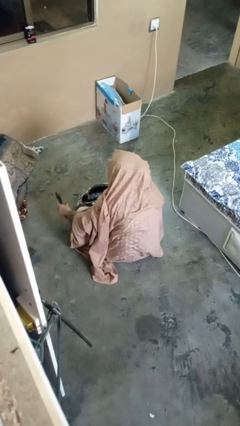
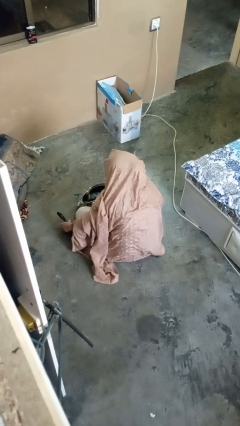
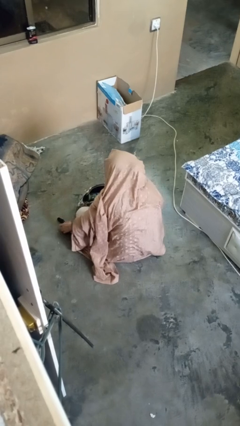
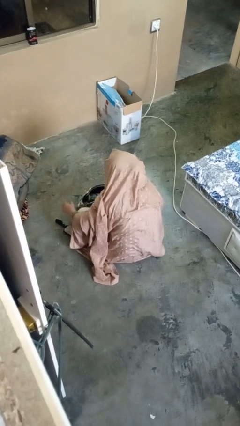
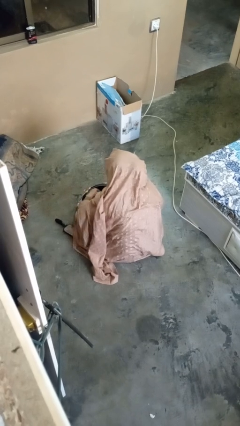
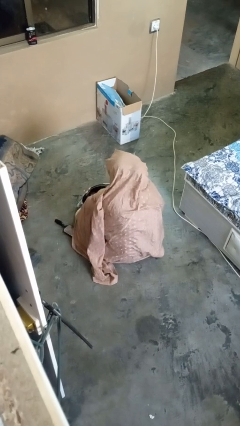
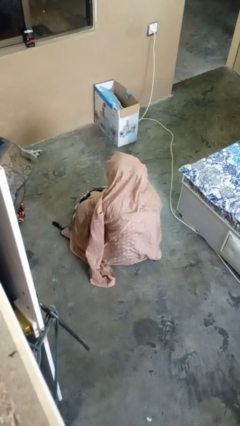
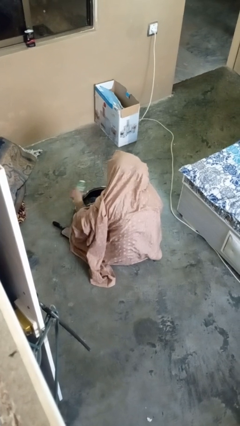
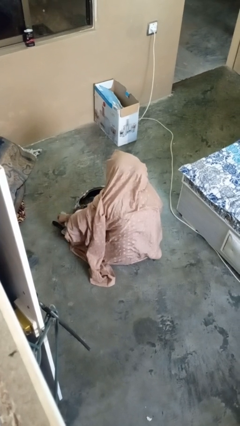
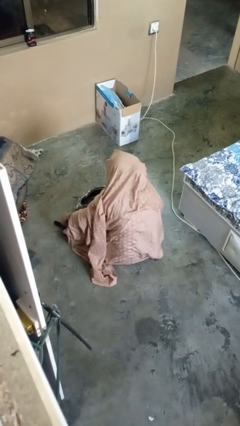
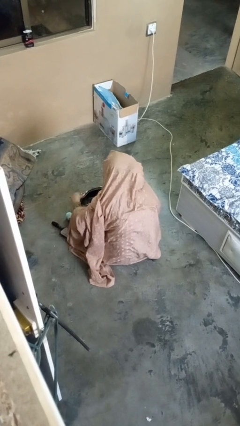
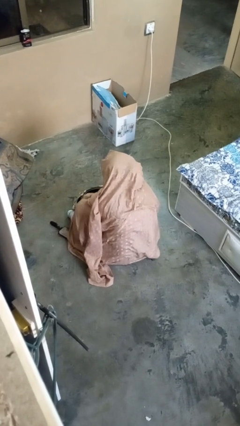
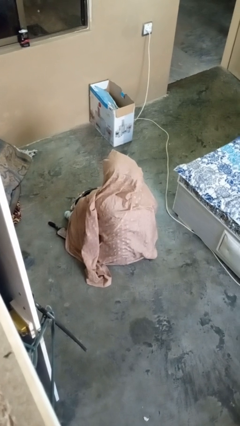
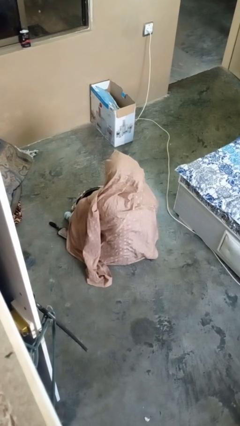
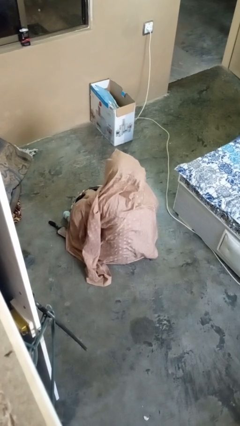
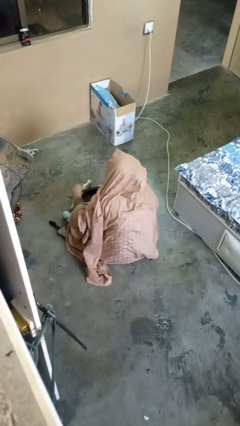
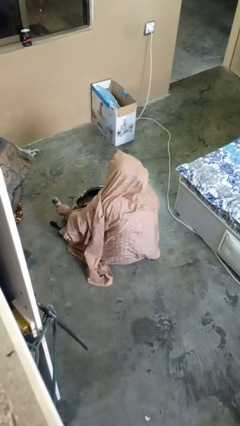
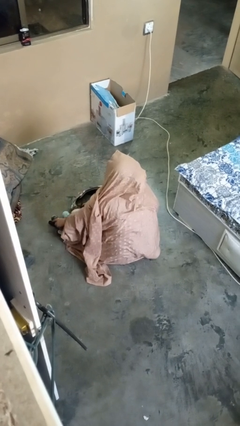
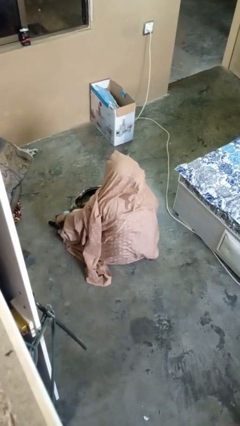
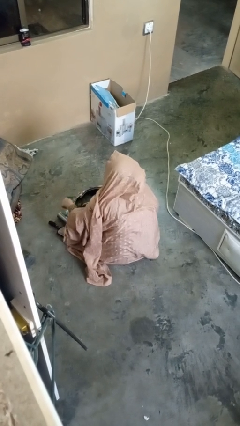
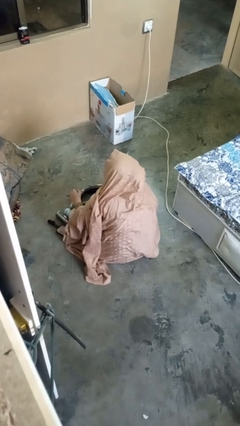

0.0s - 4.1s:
person takes object from purse

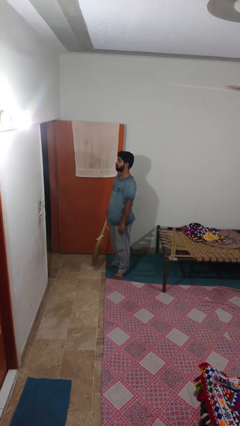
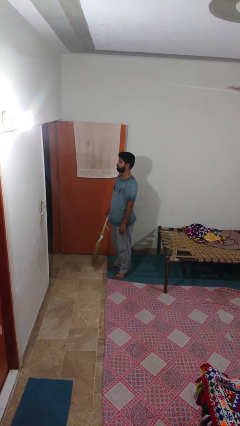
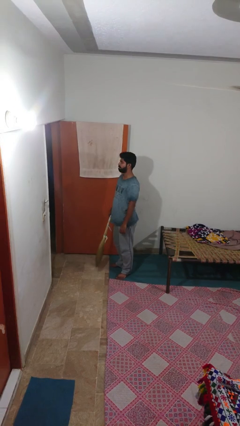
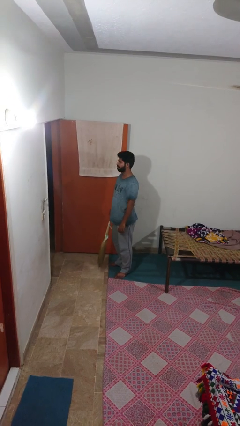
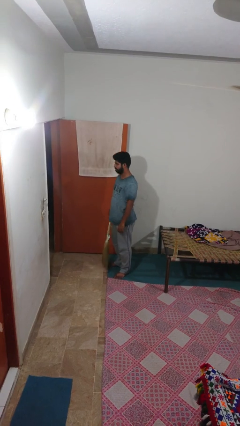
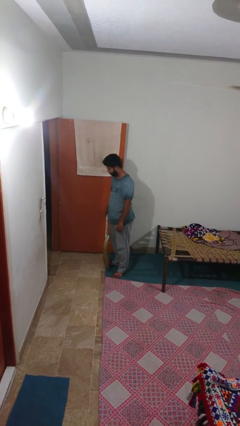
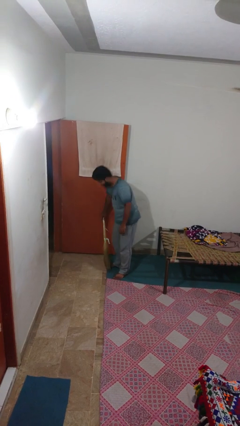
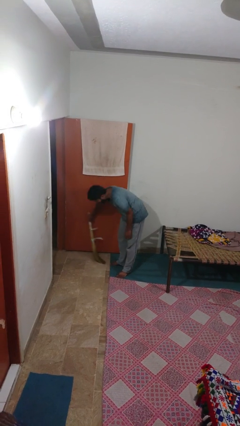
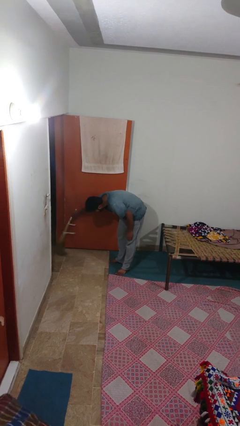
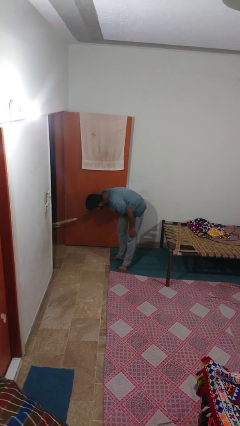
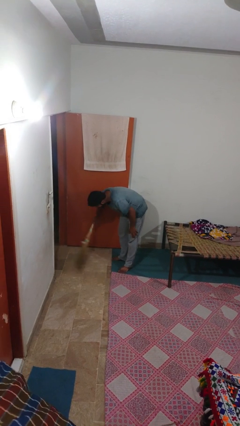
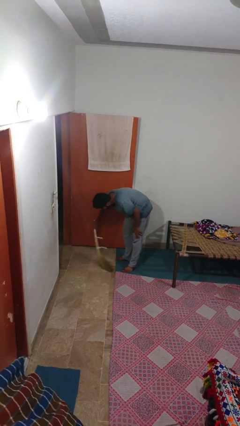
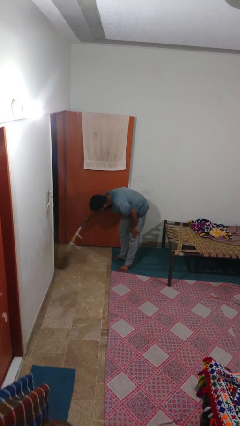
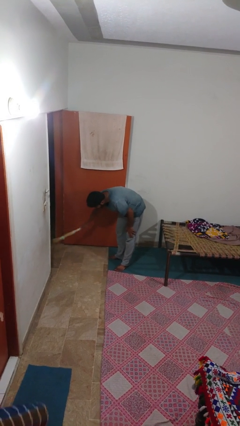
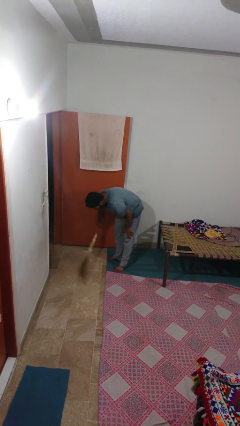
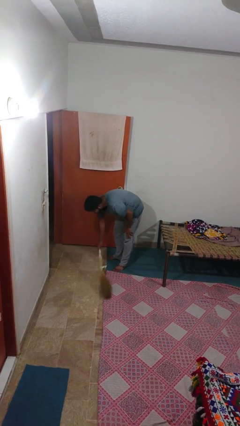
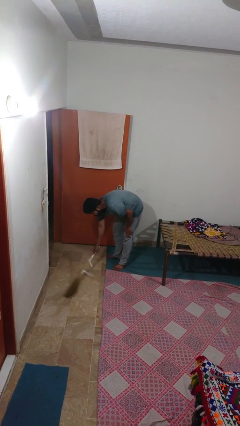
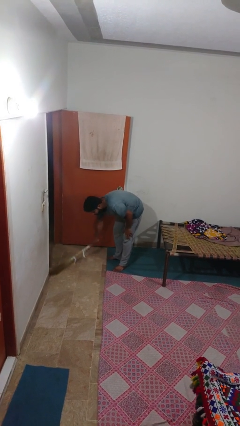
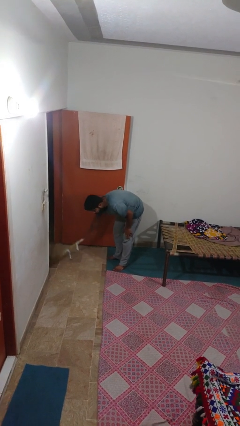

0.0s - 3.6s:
person sweeps floor

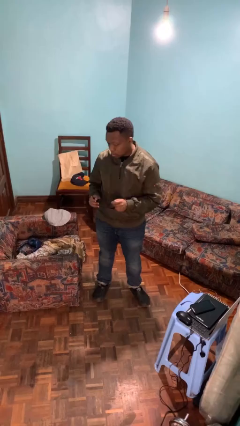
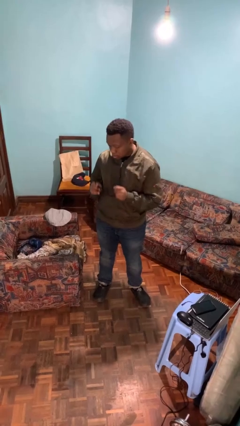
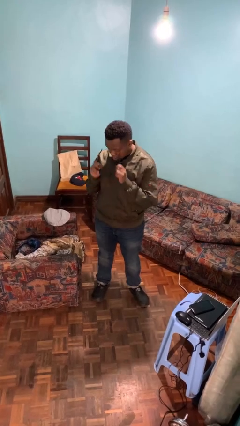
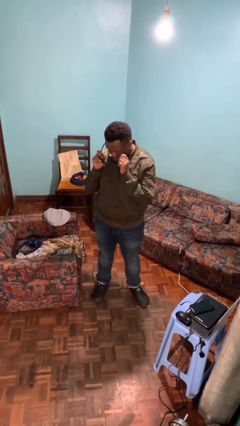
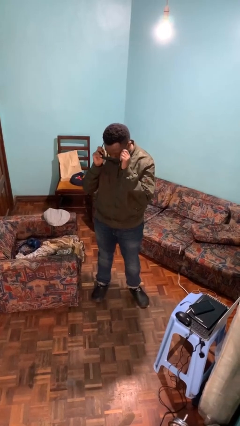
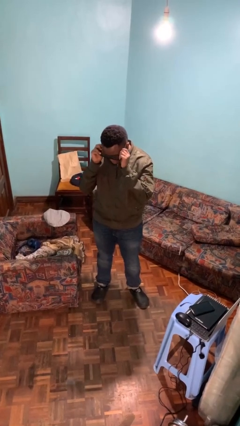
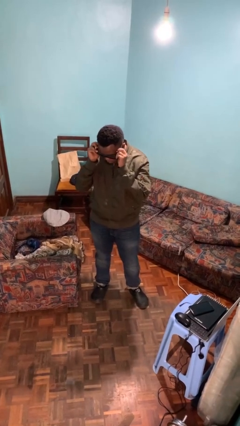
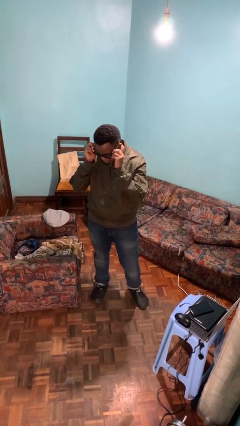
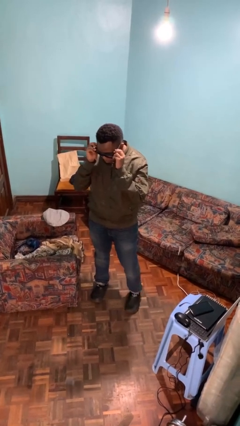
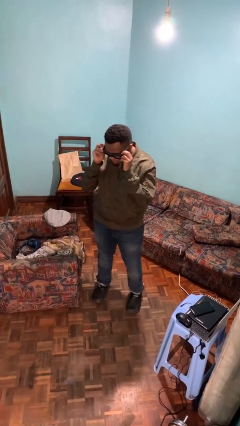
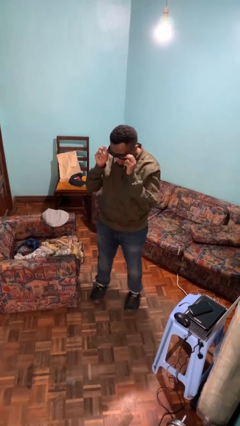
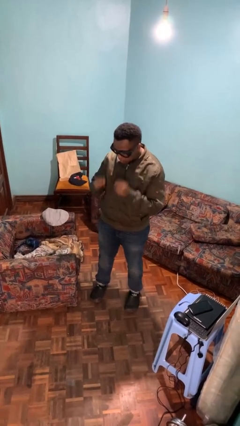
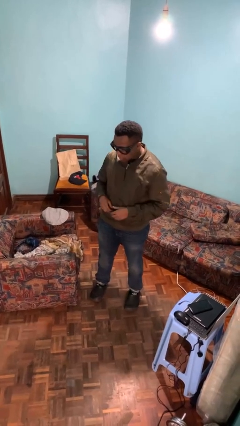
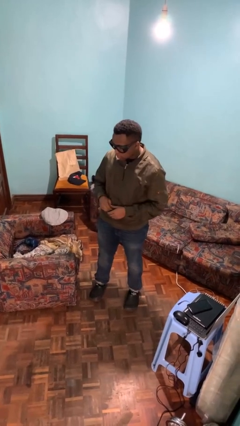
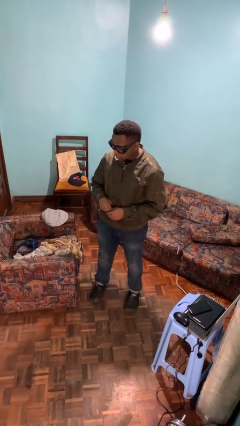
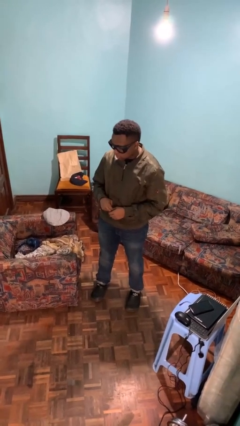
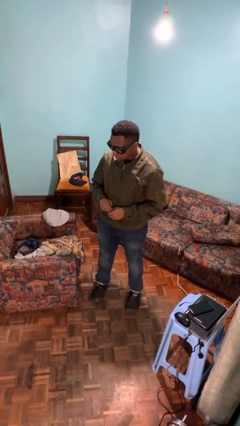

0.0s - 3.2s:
person puts on glasses

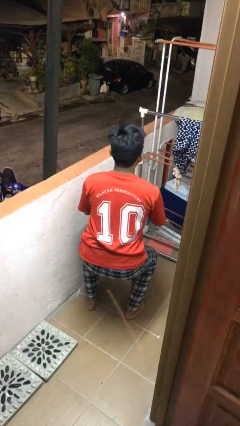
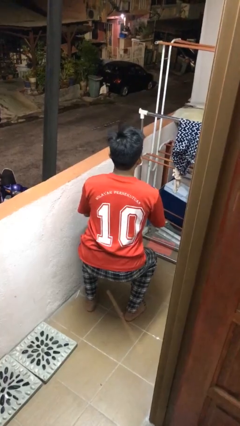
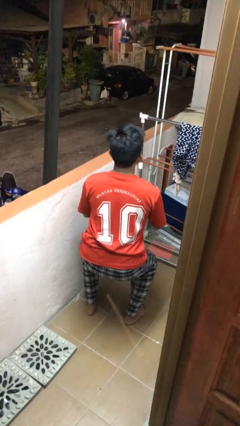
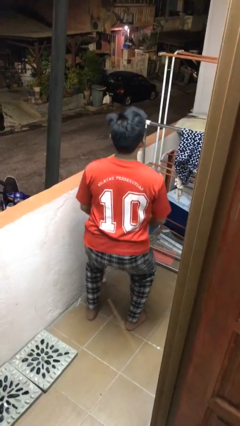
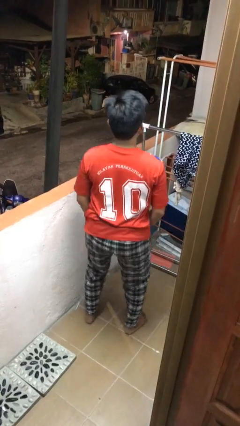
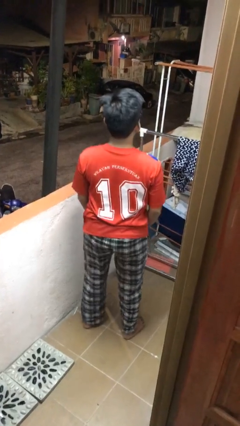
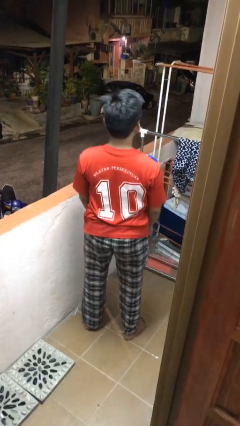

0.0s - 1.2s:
person stands up

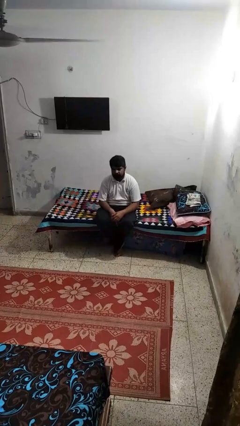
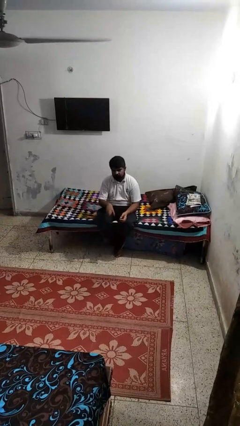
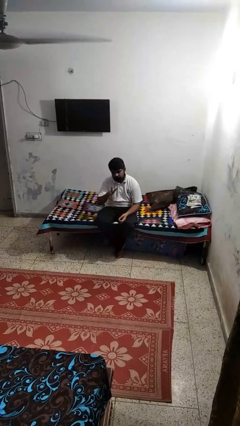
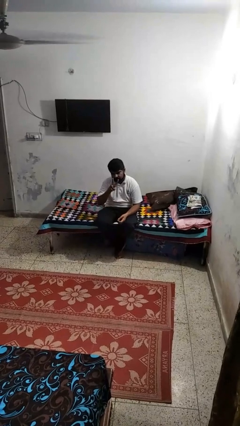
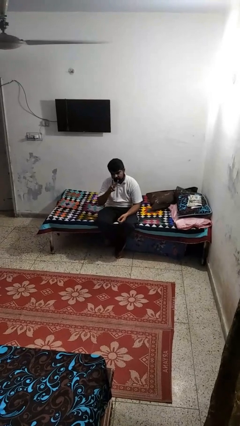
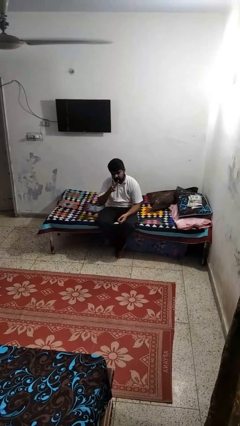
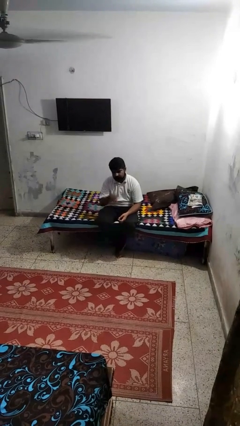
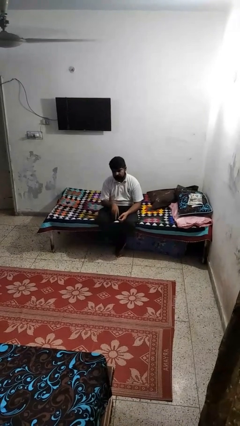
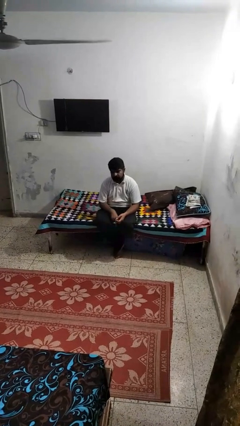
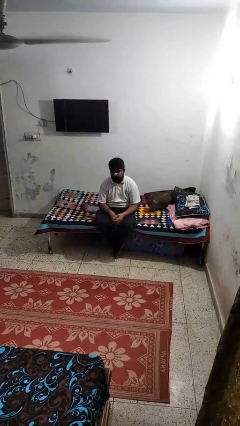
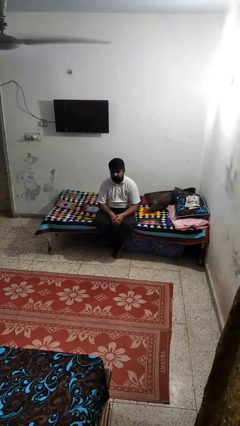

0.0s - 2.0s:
person gestures peace

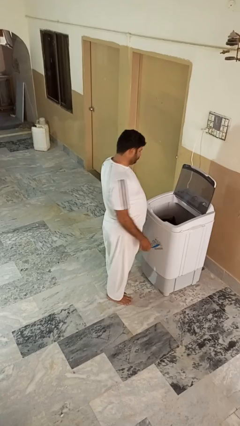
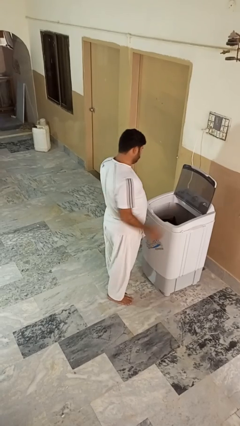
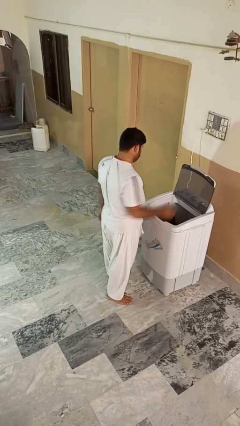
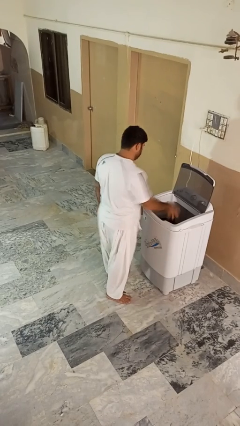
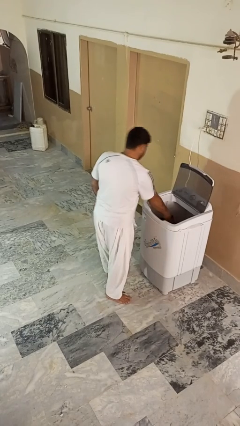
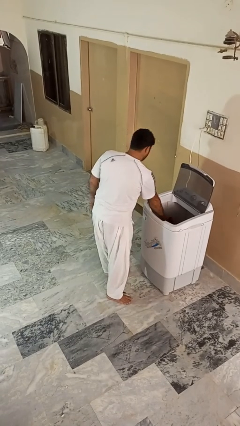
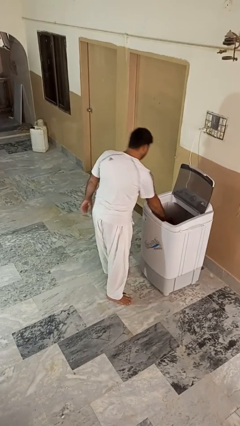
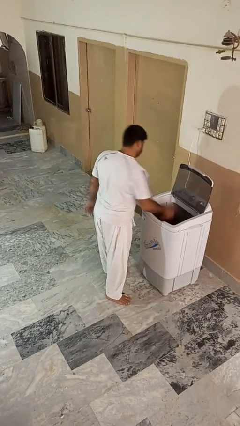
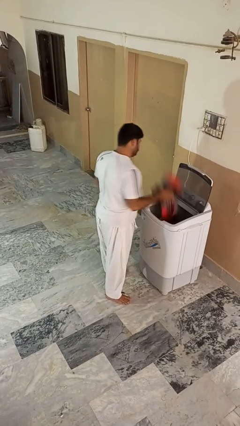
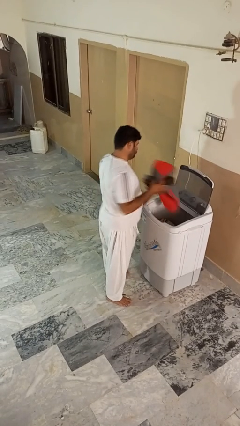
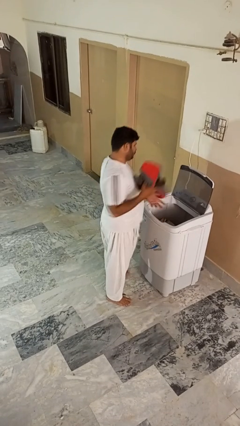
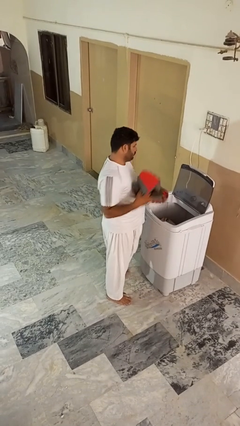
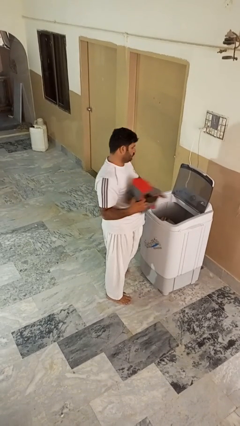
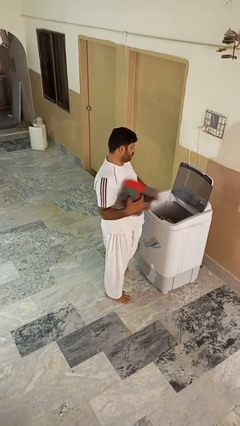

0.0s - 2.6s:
person unloads clotheswasher

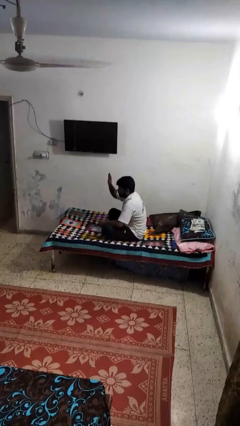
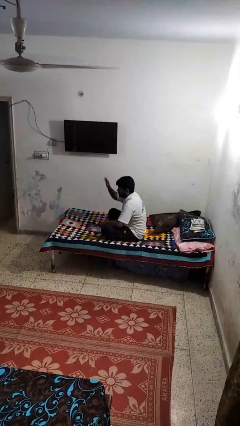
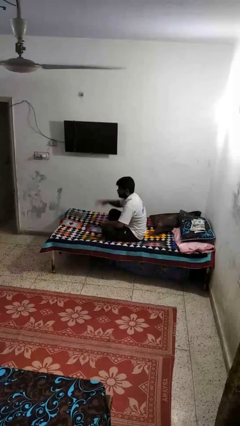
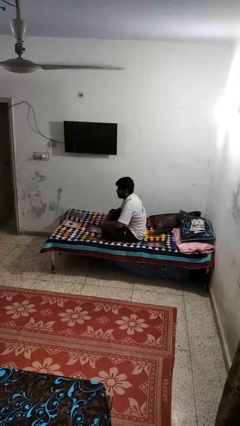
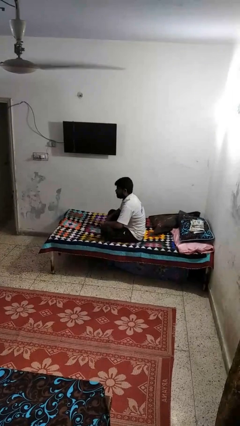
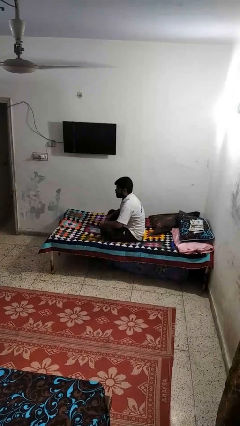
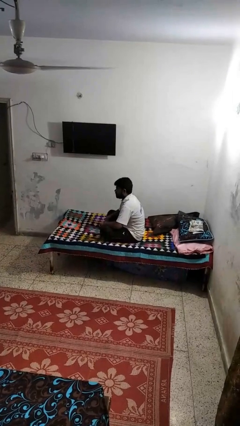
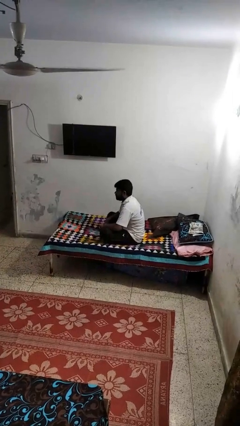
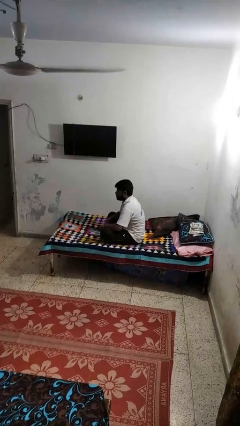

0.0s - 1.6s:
person gestures lower hand
